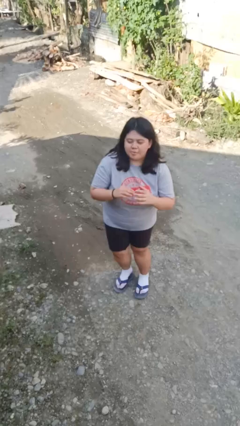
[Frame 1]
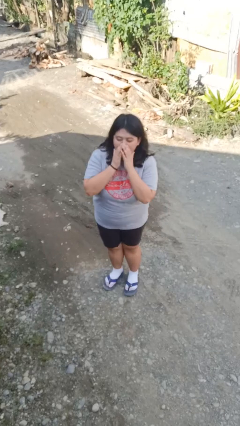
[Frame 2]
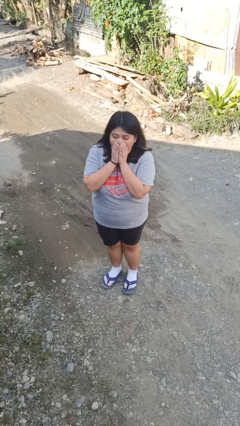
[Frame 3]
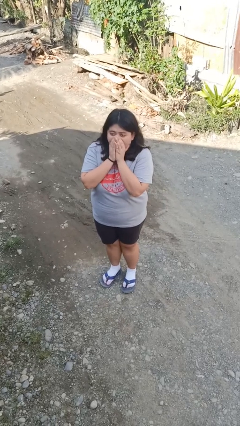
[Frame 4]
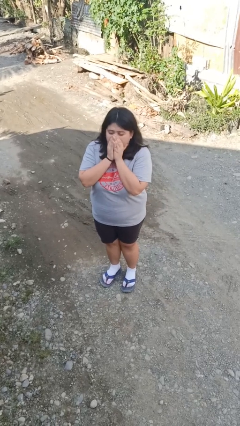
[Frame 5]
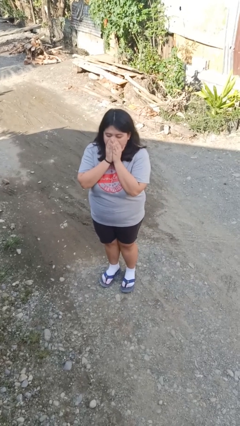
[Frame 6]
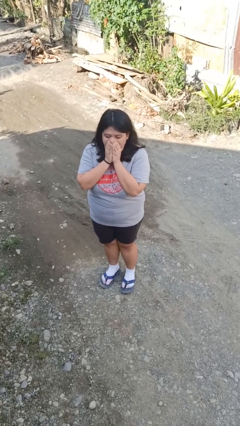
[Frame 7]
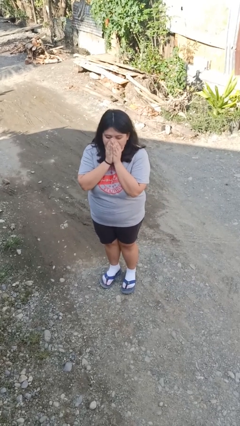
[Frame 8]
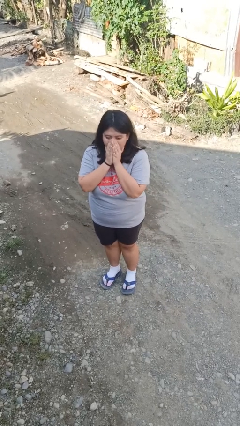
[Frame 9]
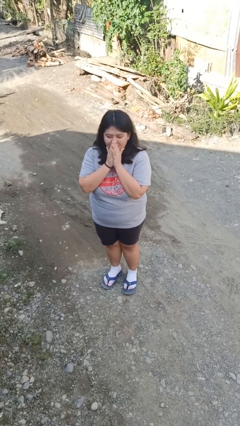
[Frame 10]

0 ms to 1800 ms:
person blows into hands

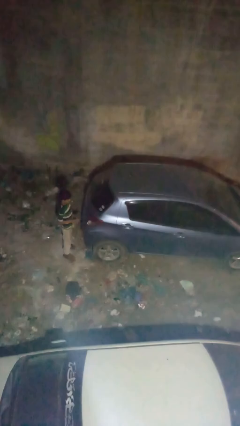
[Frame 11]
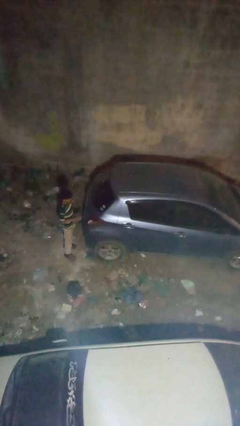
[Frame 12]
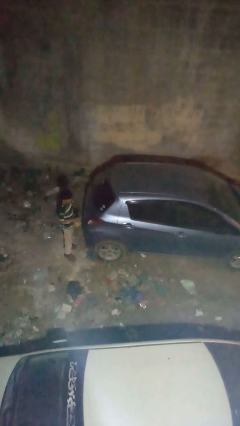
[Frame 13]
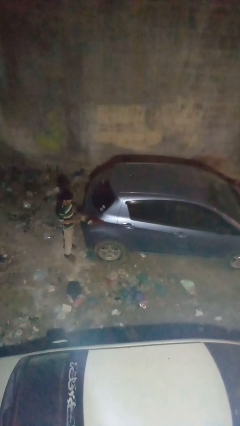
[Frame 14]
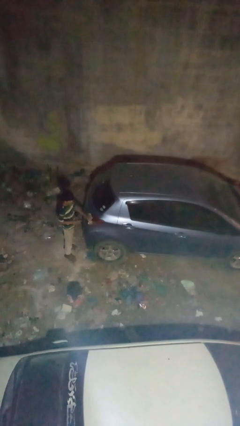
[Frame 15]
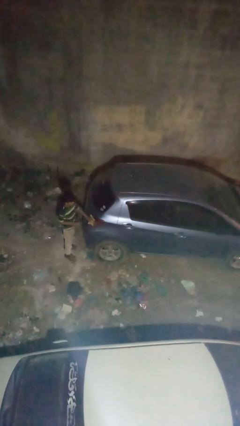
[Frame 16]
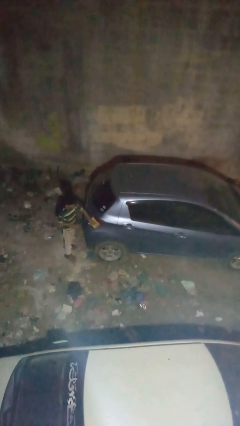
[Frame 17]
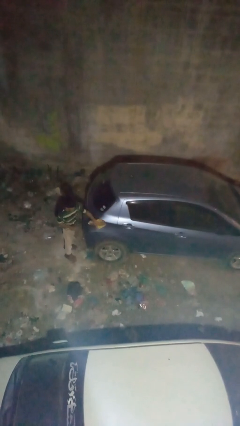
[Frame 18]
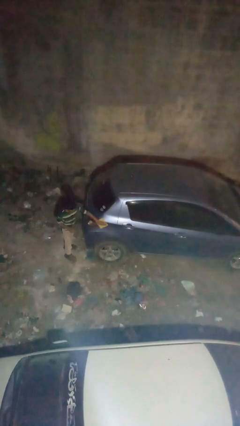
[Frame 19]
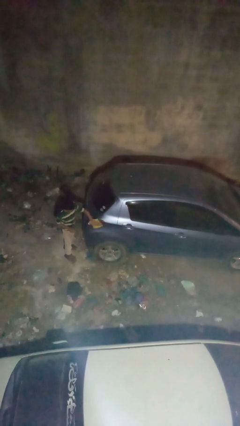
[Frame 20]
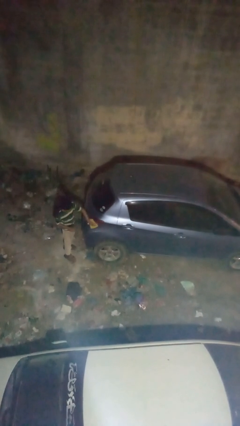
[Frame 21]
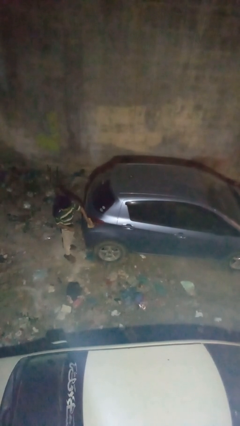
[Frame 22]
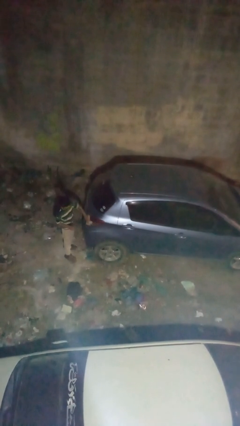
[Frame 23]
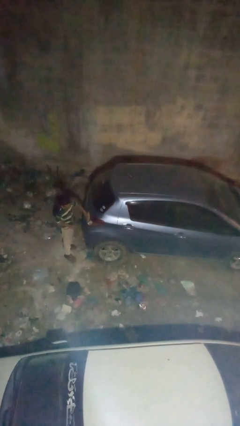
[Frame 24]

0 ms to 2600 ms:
person polishes car with rag

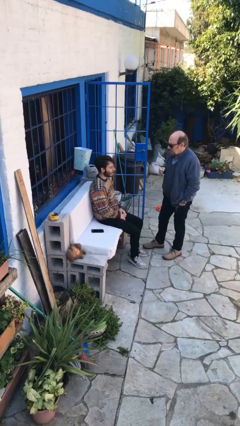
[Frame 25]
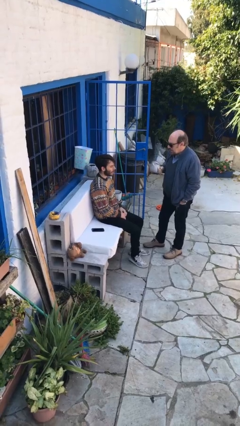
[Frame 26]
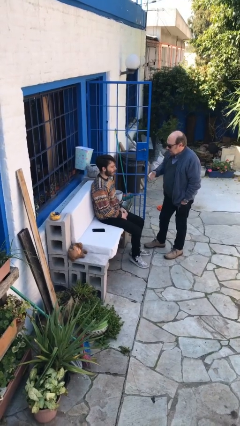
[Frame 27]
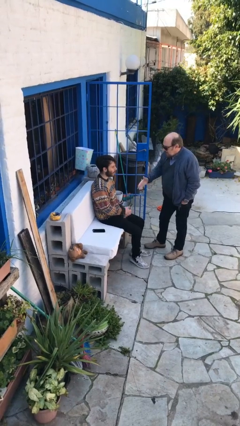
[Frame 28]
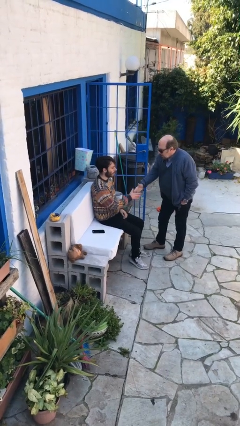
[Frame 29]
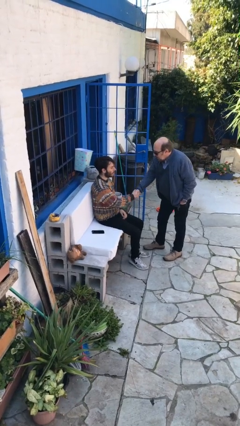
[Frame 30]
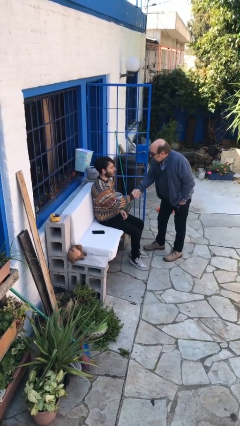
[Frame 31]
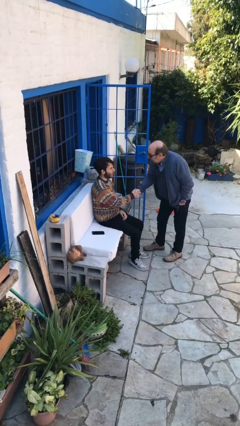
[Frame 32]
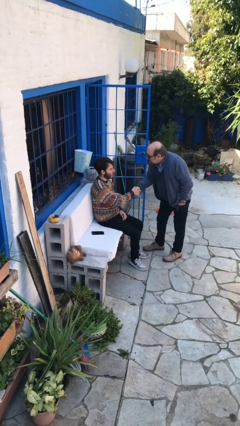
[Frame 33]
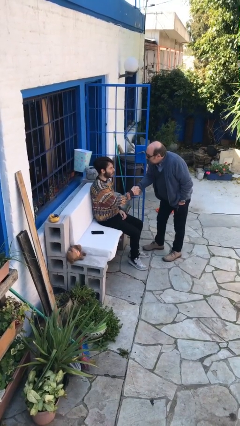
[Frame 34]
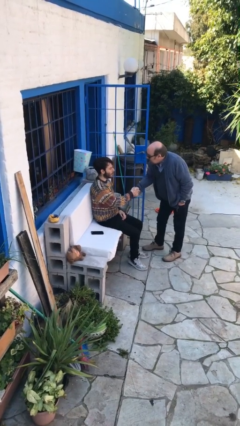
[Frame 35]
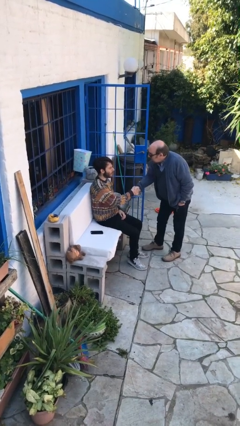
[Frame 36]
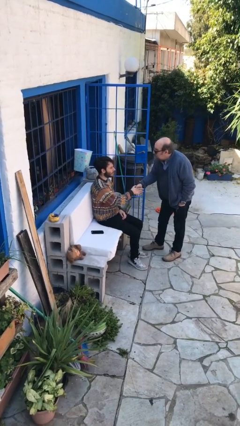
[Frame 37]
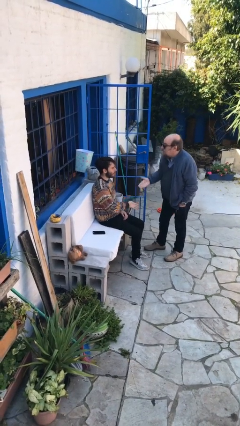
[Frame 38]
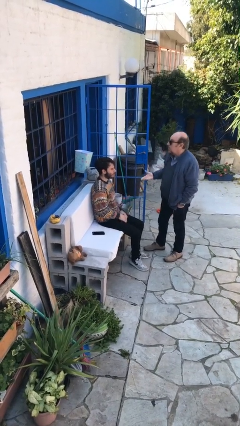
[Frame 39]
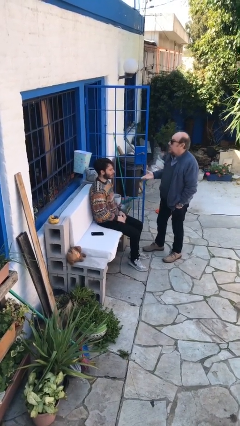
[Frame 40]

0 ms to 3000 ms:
person shakes hand

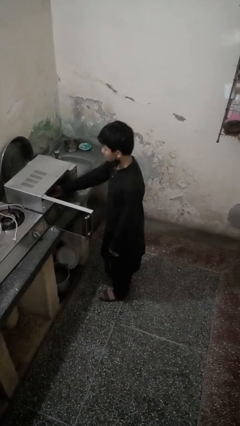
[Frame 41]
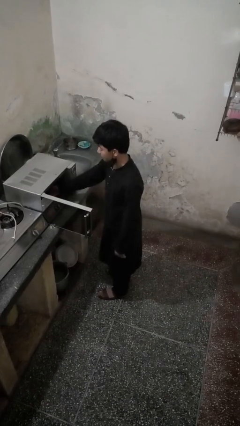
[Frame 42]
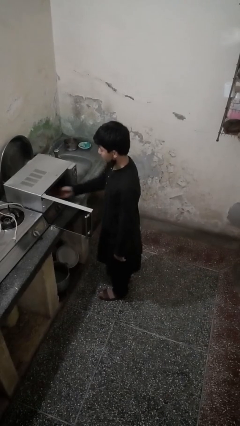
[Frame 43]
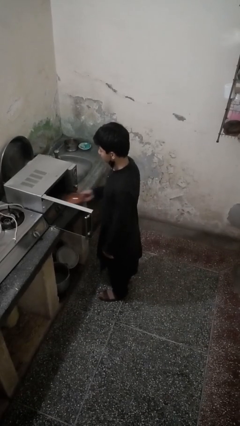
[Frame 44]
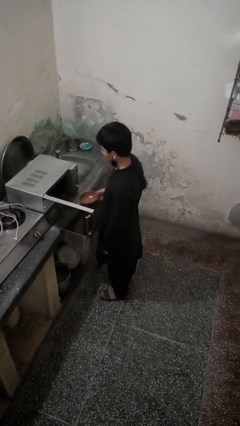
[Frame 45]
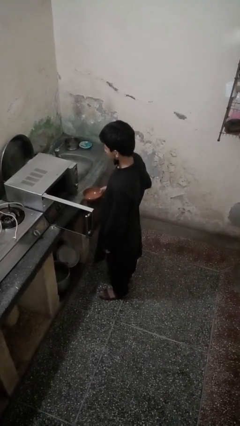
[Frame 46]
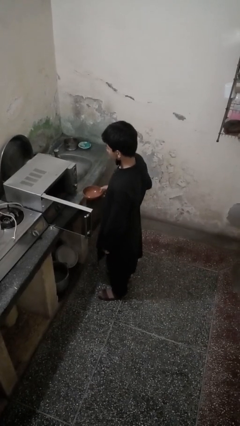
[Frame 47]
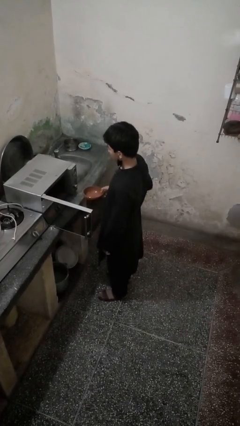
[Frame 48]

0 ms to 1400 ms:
person takes object from microwave

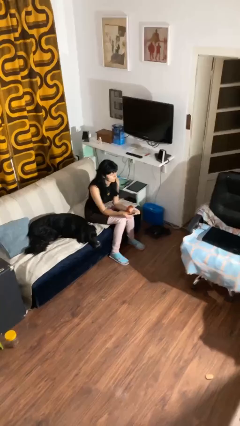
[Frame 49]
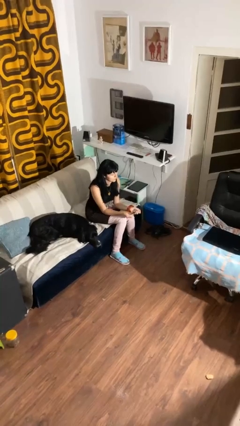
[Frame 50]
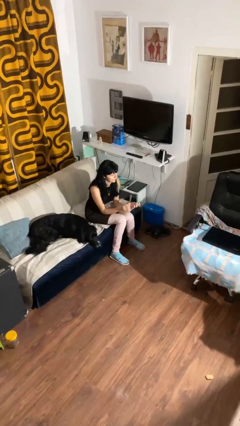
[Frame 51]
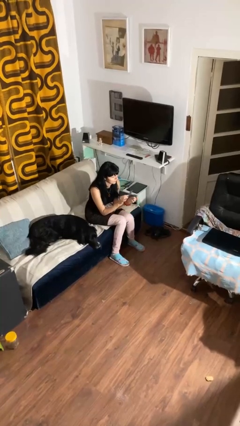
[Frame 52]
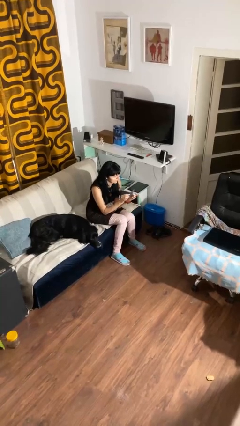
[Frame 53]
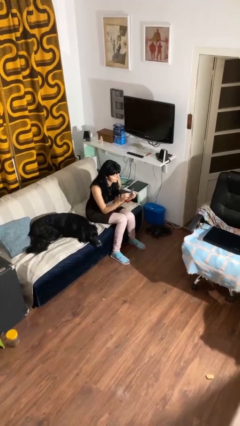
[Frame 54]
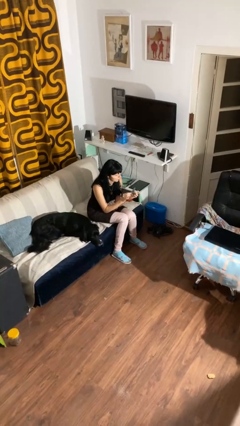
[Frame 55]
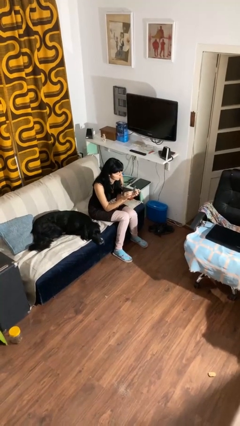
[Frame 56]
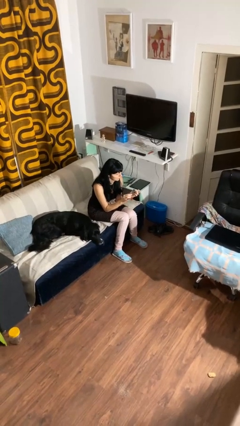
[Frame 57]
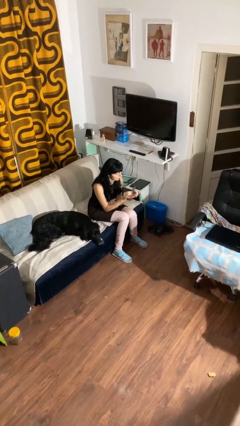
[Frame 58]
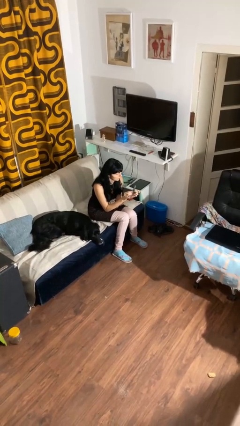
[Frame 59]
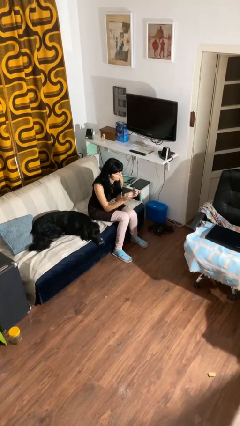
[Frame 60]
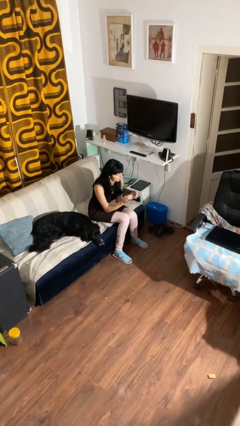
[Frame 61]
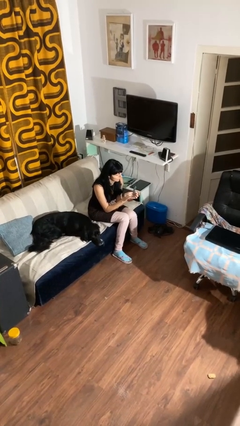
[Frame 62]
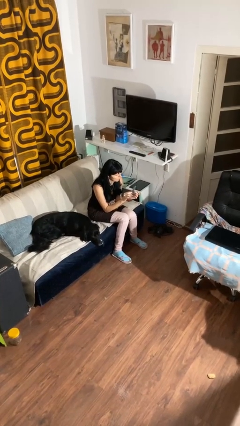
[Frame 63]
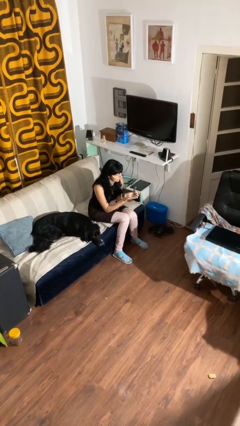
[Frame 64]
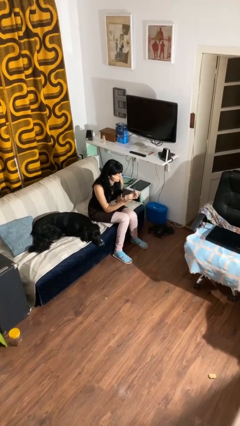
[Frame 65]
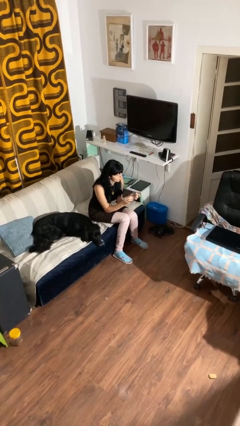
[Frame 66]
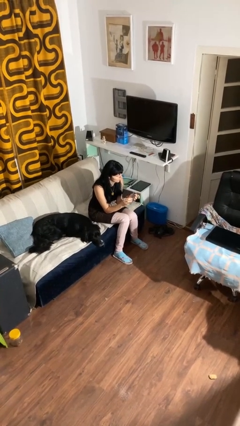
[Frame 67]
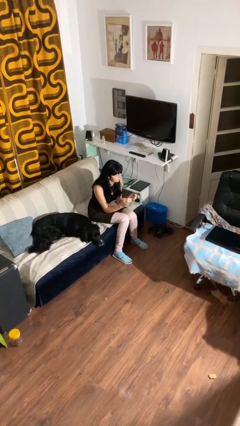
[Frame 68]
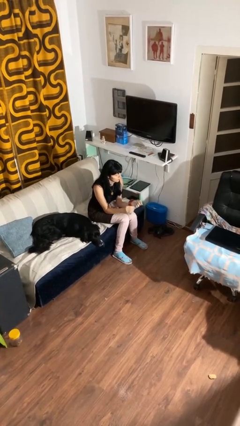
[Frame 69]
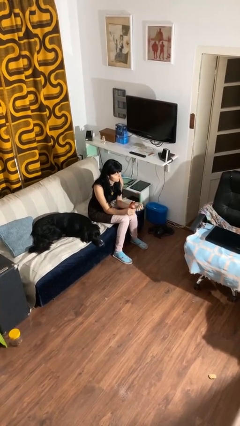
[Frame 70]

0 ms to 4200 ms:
person files fingernails

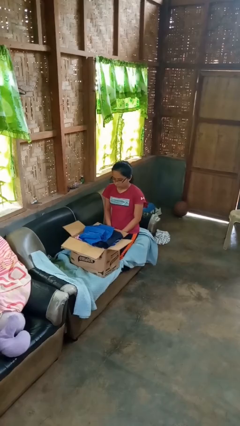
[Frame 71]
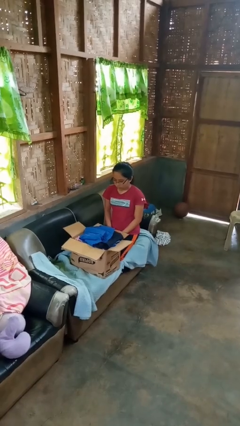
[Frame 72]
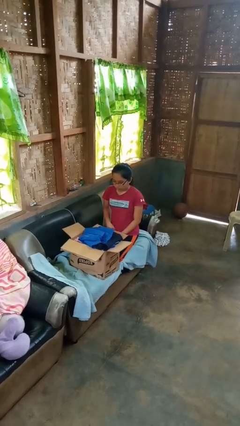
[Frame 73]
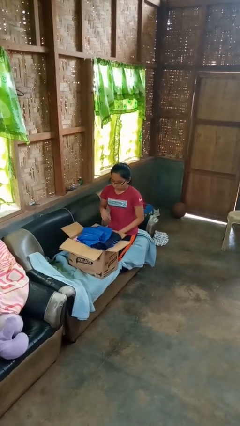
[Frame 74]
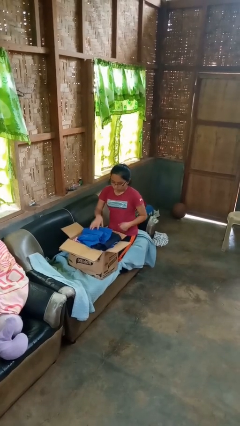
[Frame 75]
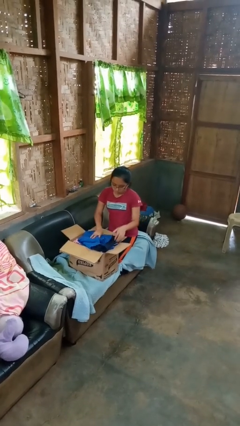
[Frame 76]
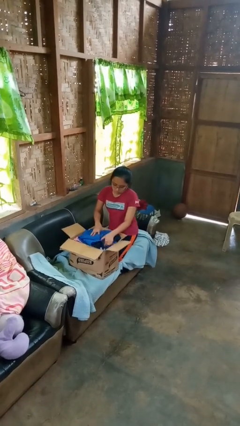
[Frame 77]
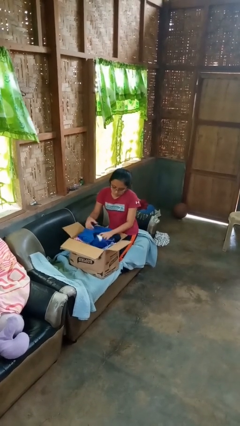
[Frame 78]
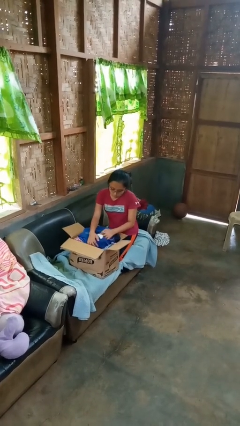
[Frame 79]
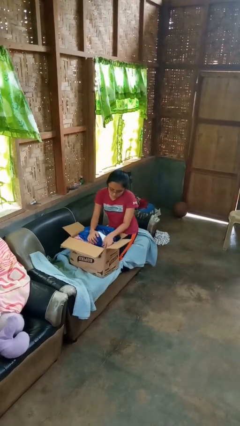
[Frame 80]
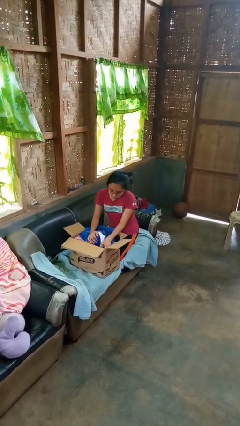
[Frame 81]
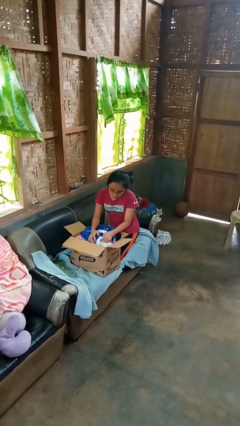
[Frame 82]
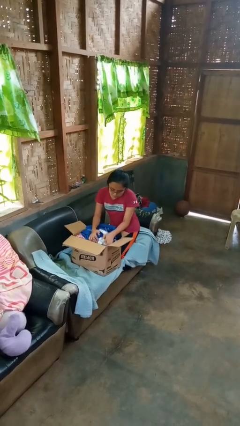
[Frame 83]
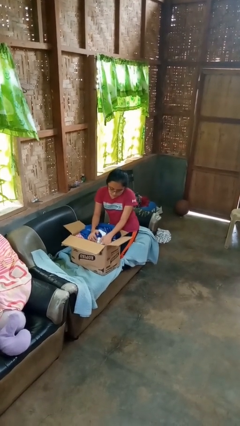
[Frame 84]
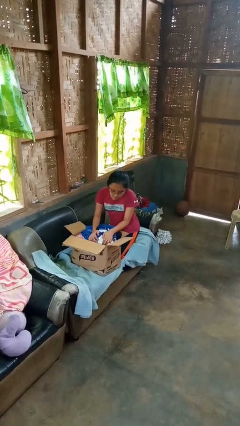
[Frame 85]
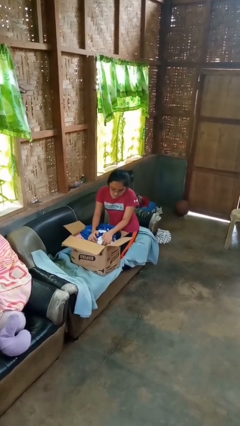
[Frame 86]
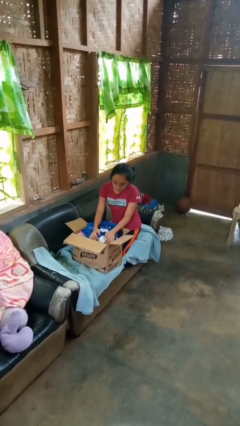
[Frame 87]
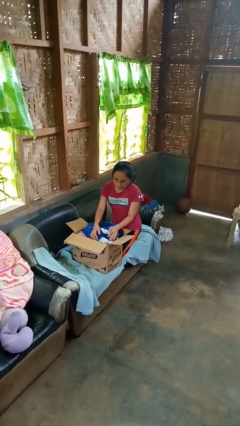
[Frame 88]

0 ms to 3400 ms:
person searches in box

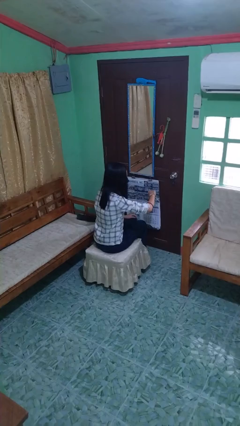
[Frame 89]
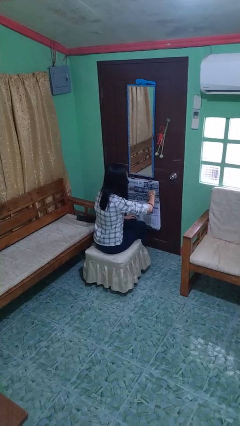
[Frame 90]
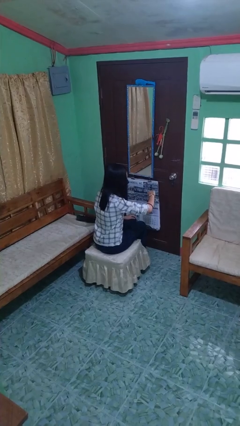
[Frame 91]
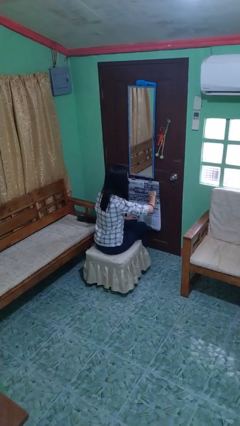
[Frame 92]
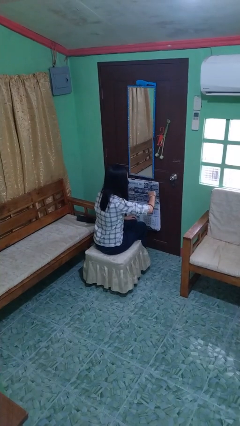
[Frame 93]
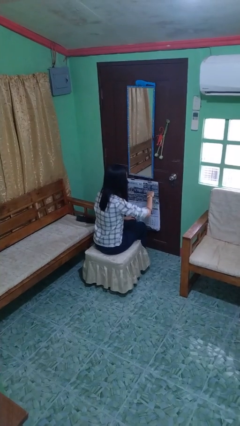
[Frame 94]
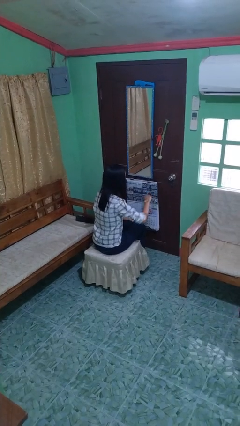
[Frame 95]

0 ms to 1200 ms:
person looks at wristwatch
